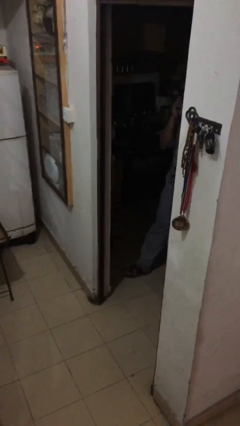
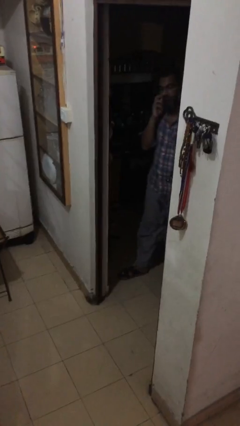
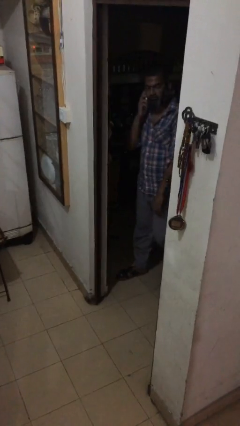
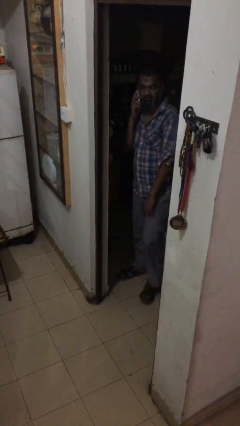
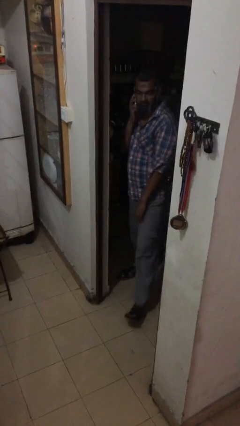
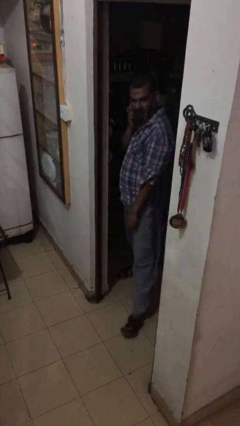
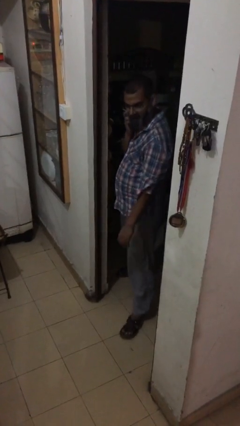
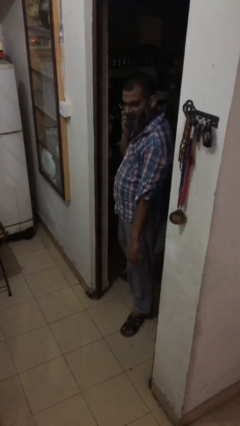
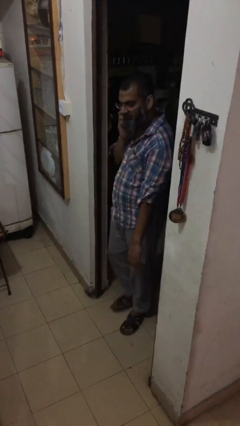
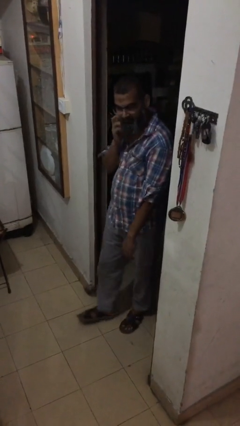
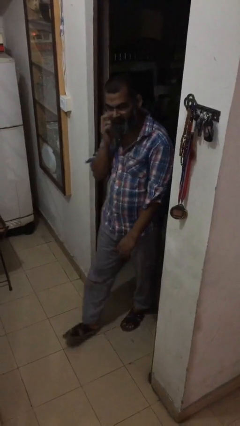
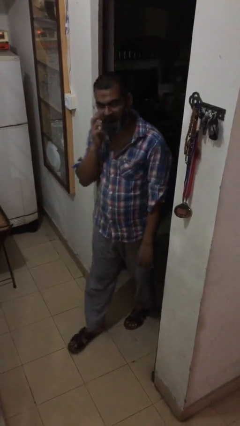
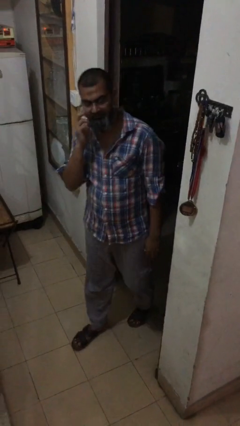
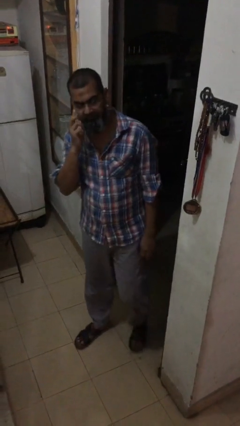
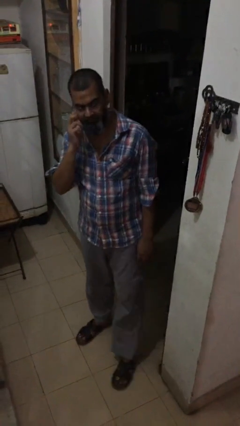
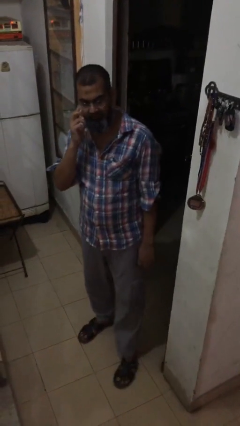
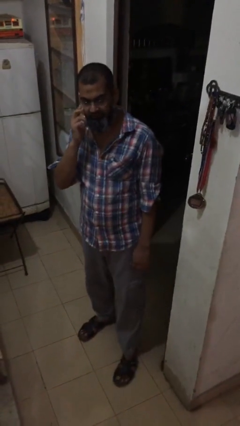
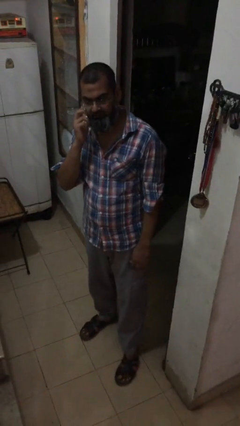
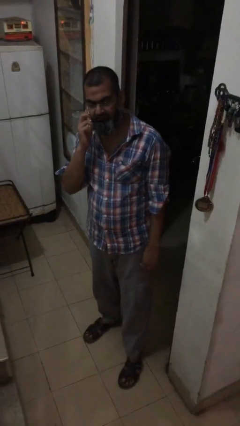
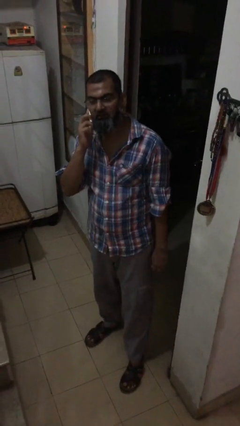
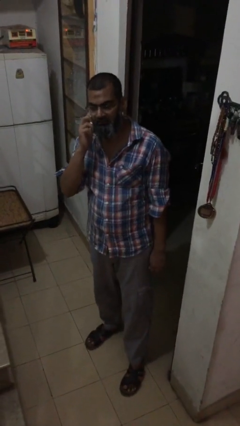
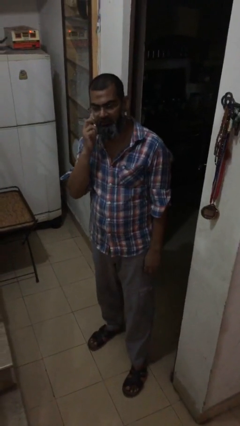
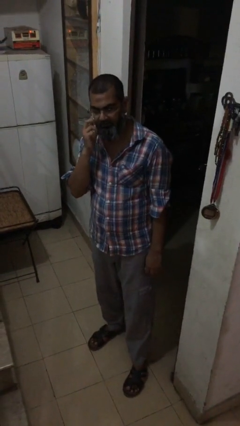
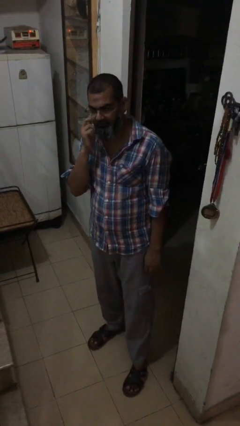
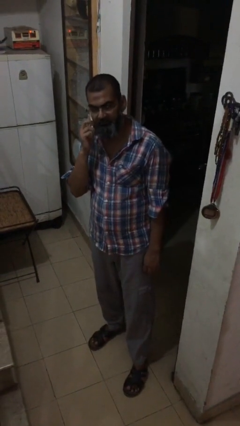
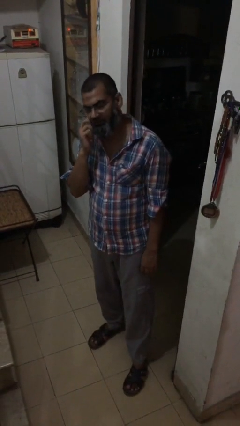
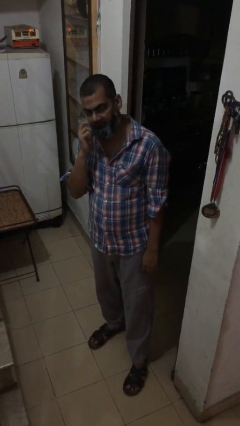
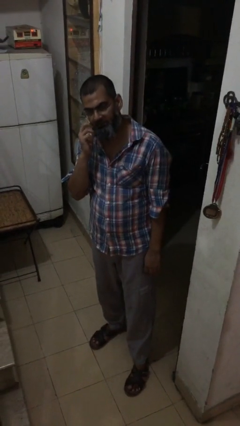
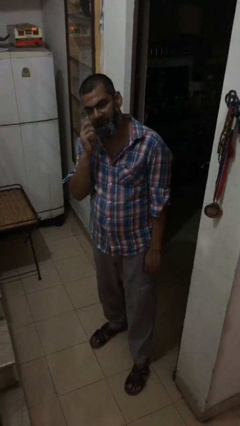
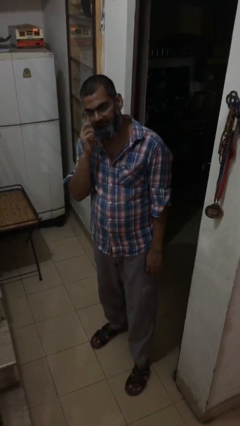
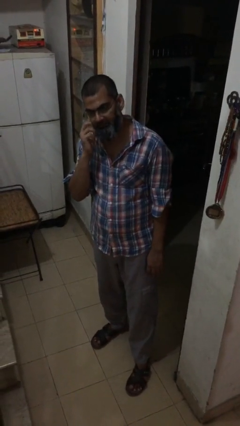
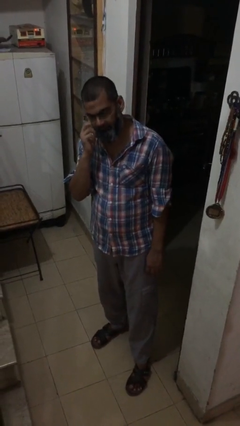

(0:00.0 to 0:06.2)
person enters scene through structure

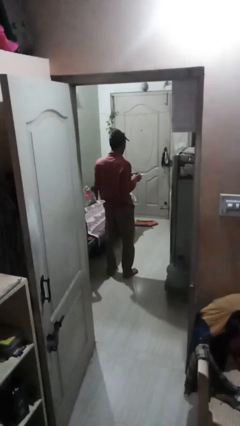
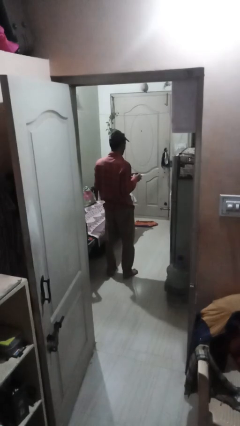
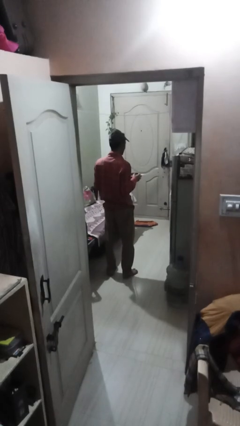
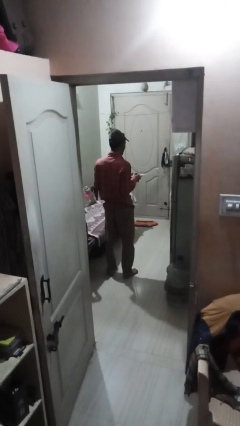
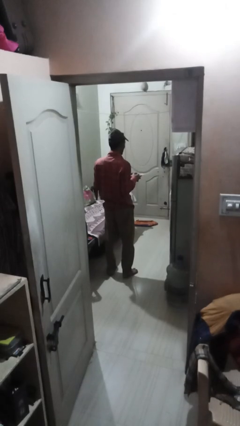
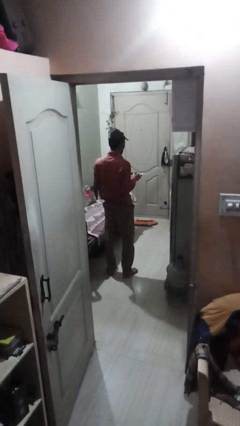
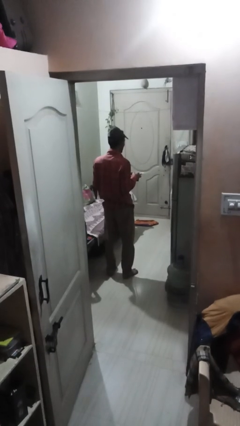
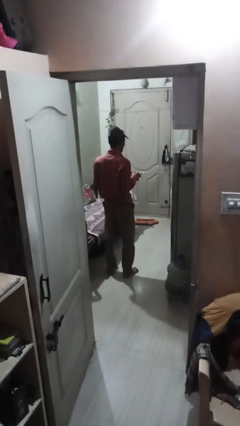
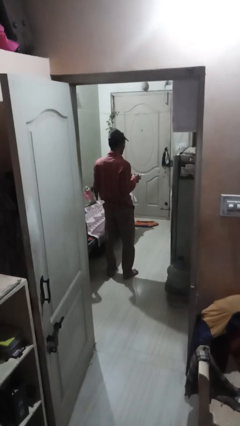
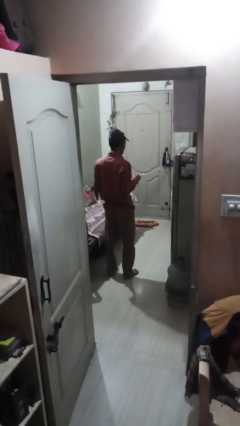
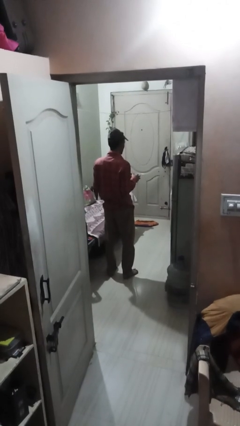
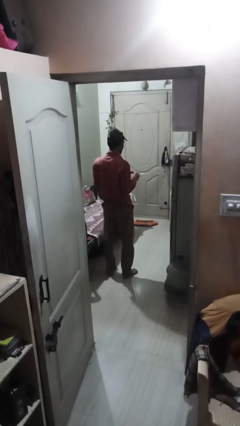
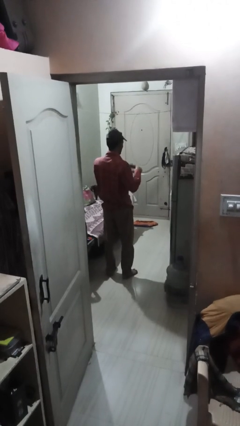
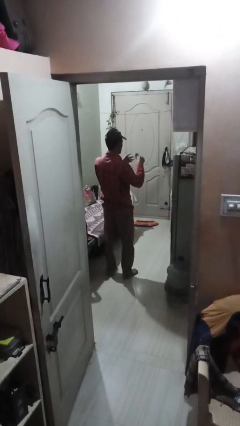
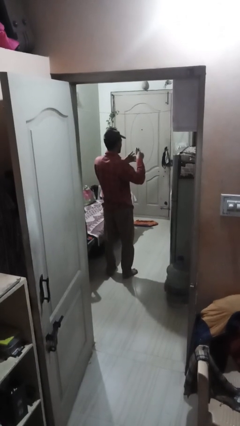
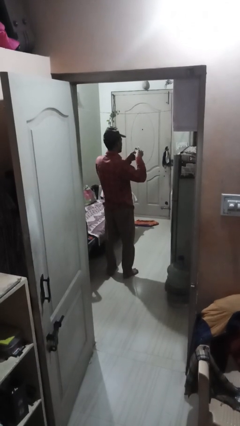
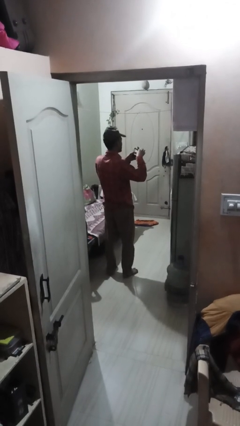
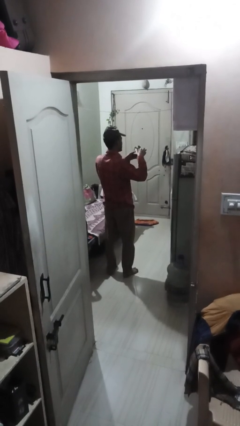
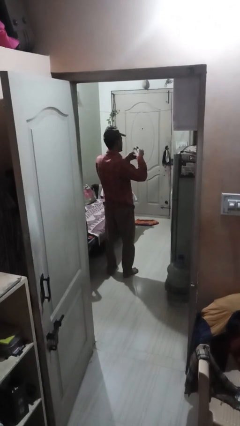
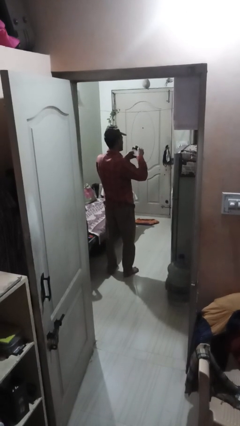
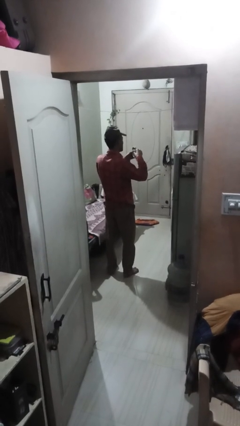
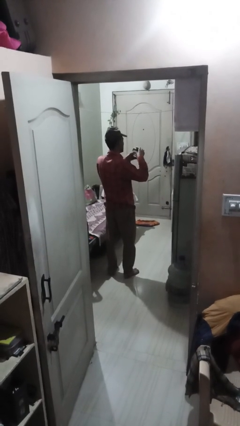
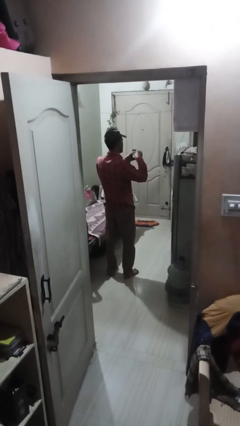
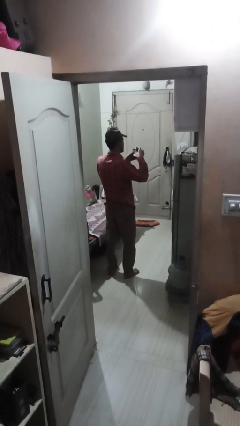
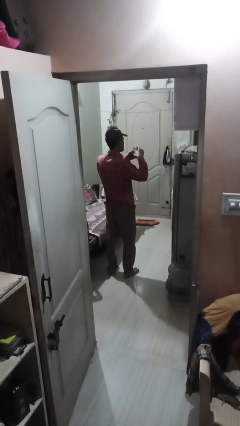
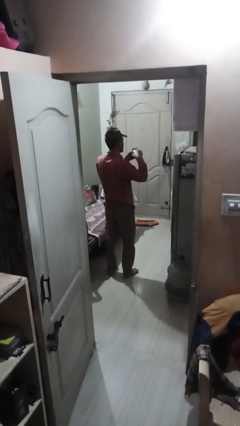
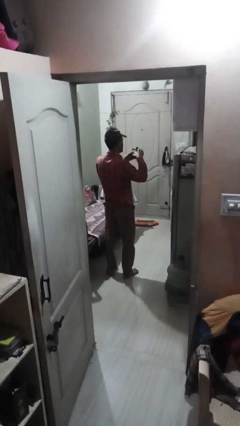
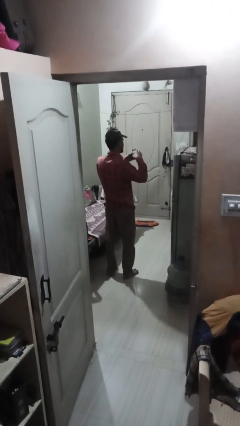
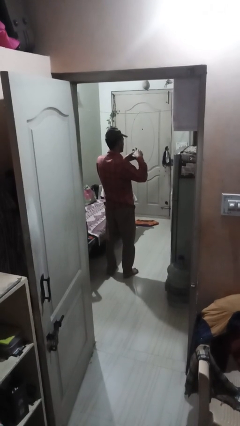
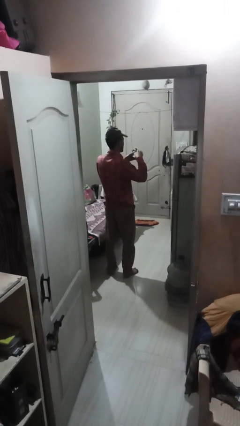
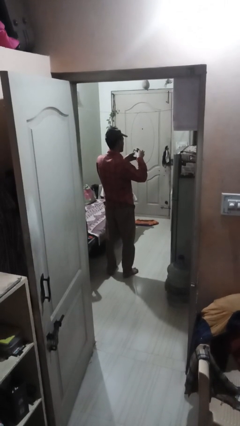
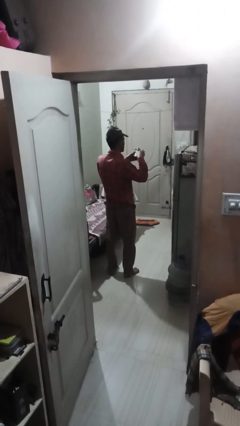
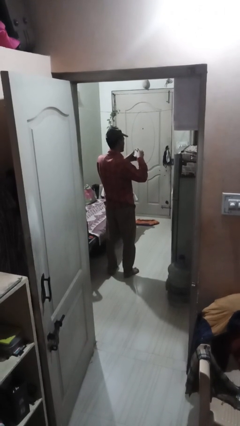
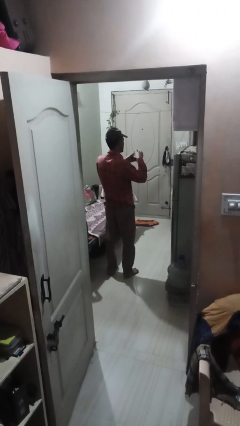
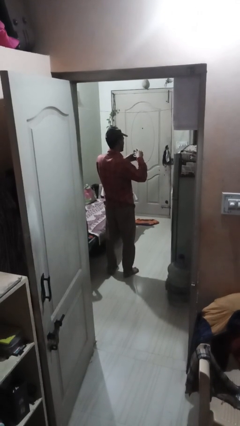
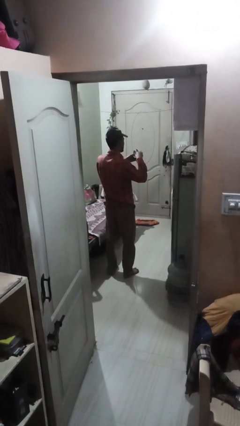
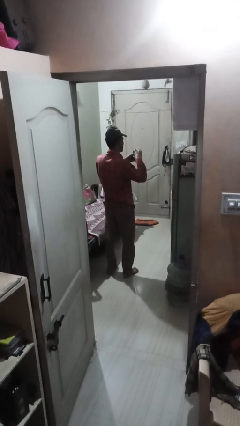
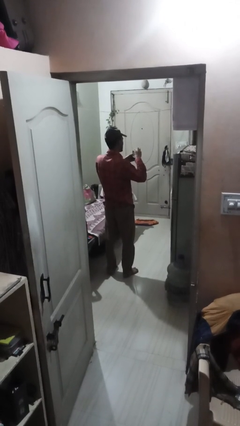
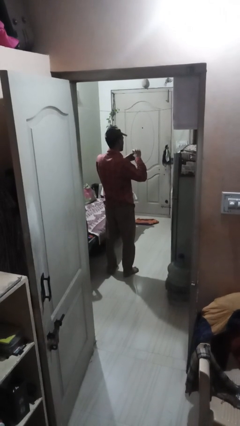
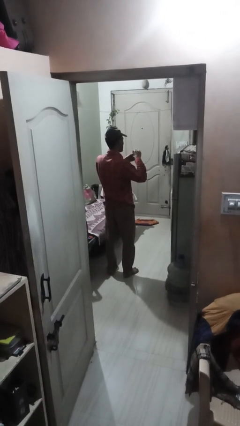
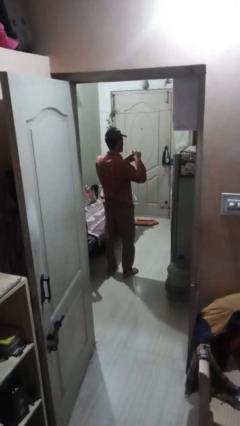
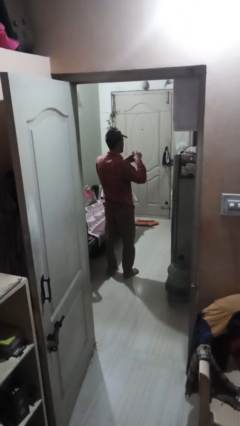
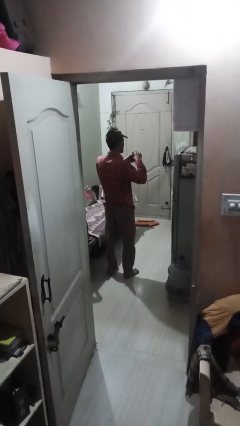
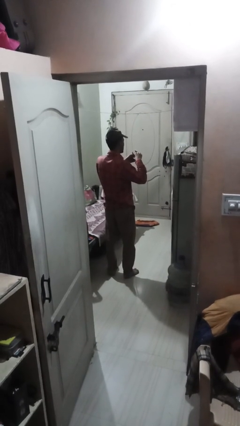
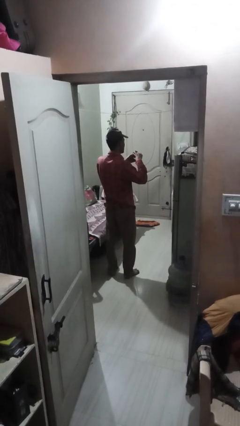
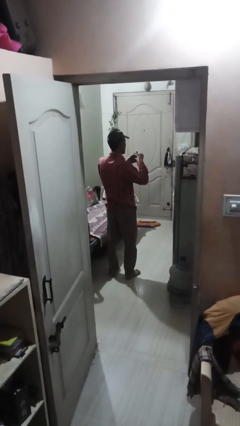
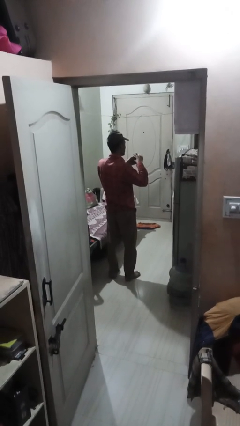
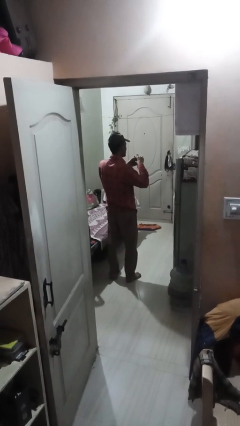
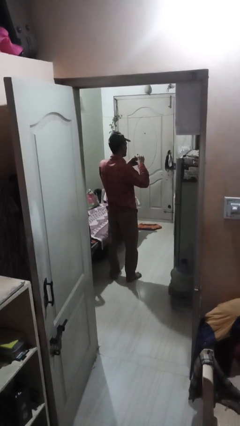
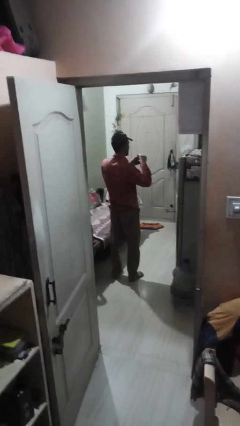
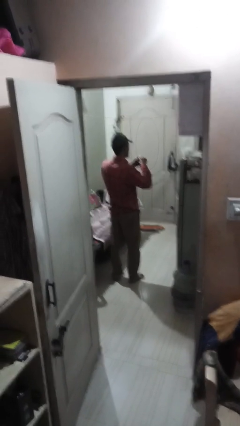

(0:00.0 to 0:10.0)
person searches in purse

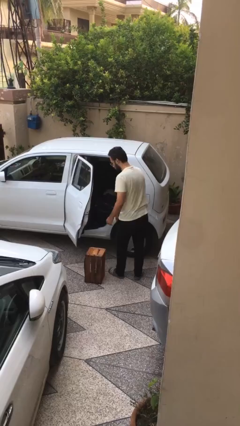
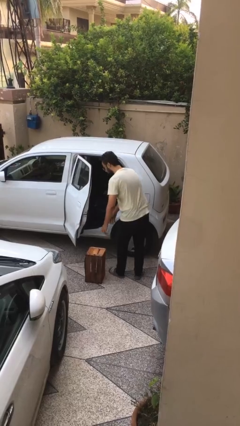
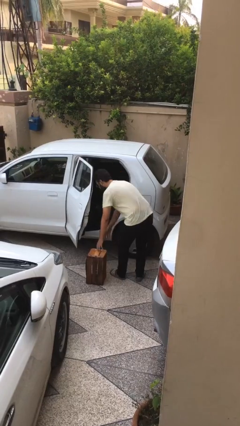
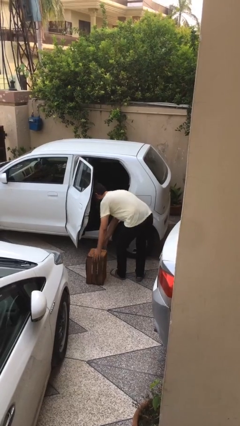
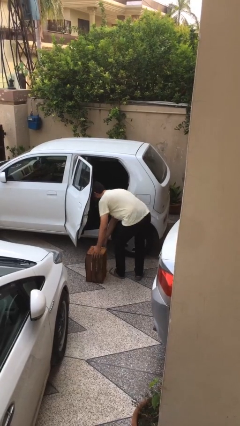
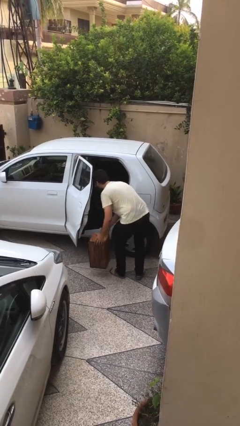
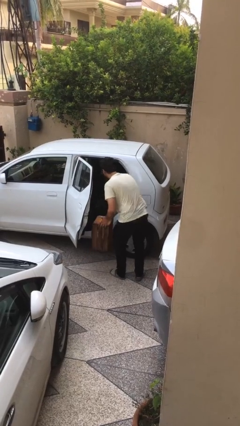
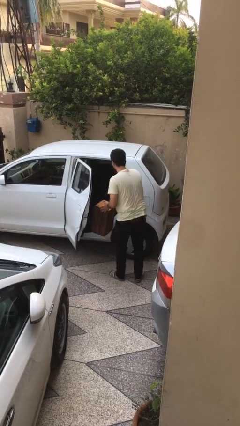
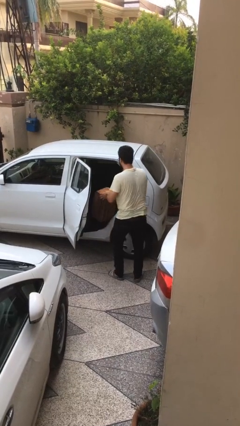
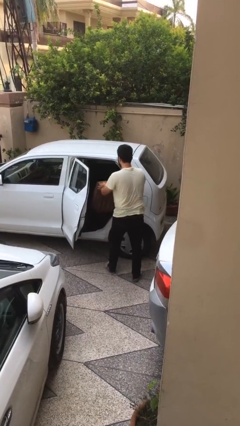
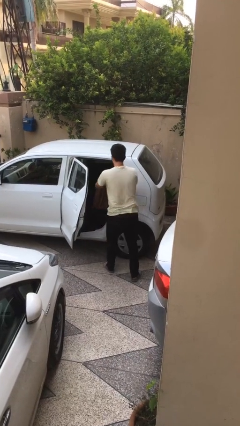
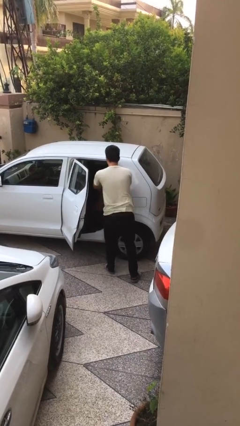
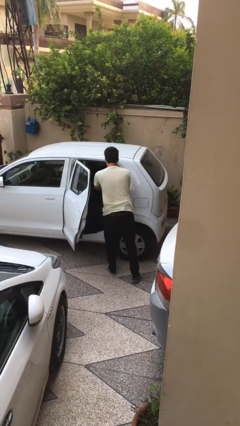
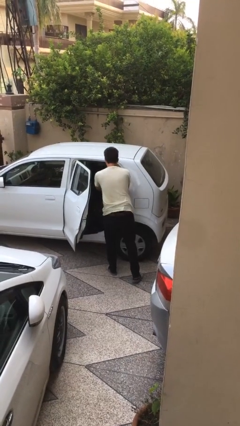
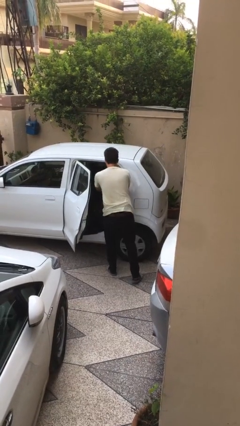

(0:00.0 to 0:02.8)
person loads car
